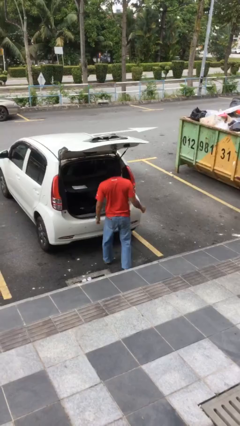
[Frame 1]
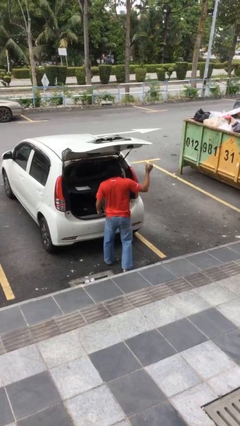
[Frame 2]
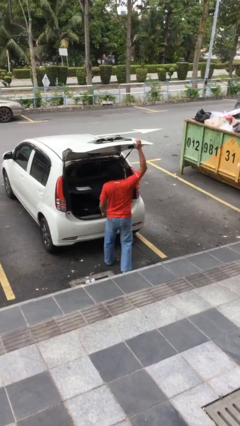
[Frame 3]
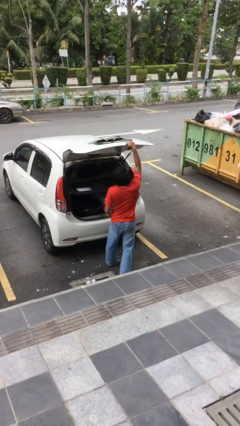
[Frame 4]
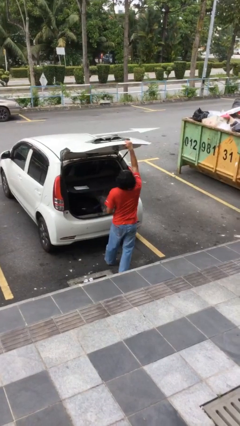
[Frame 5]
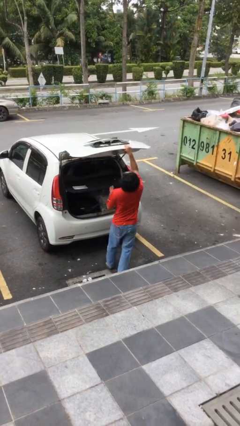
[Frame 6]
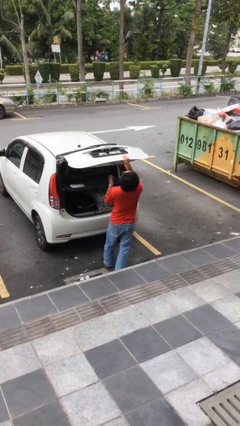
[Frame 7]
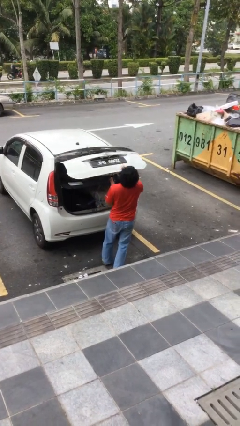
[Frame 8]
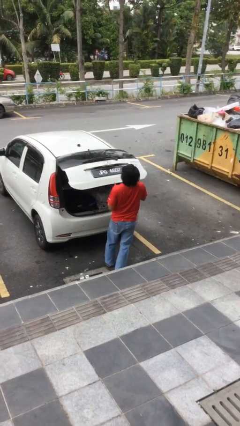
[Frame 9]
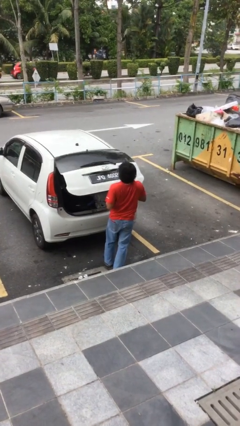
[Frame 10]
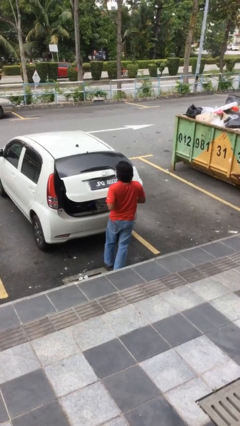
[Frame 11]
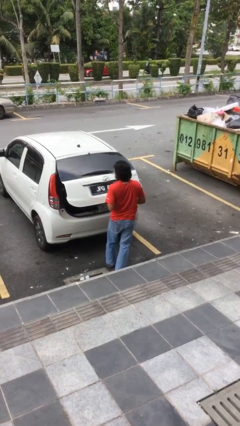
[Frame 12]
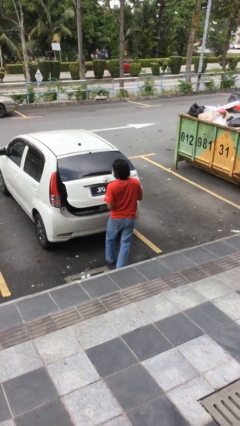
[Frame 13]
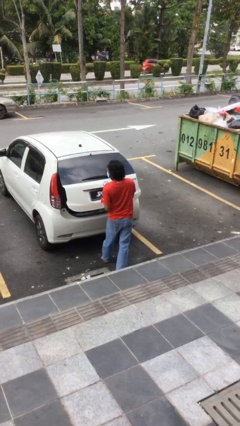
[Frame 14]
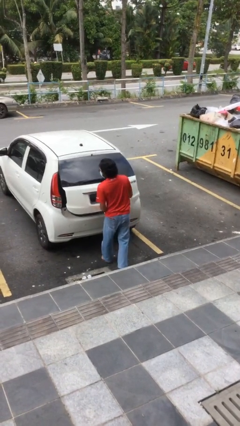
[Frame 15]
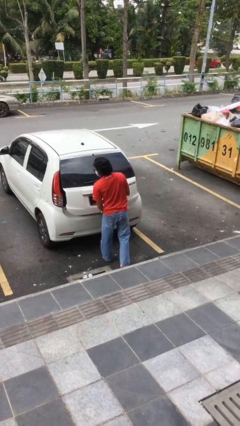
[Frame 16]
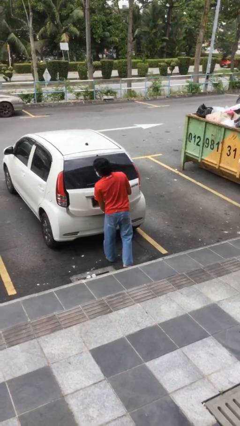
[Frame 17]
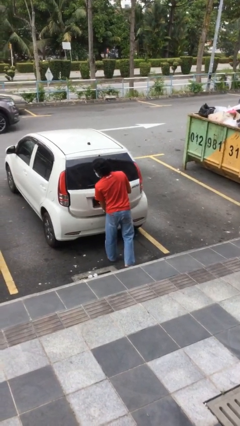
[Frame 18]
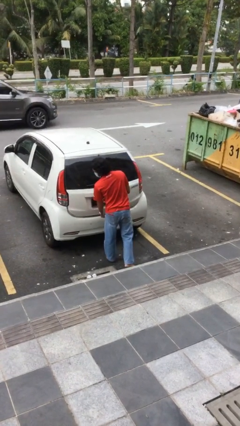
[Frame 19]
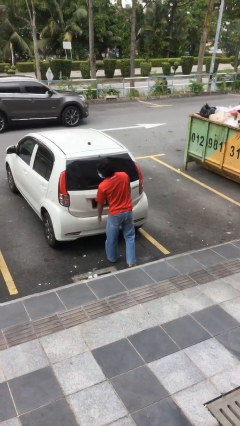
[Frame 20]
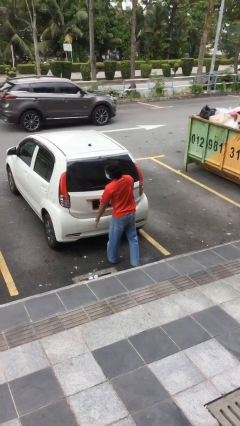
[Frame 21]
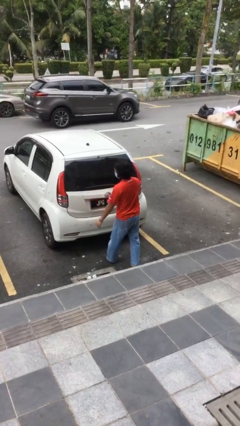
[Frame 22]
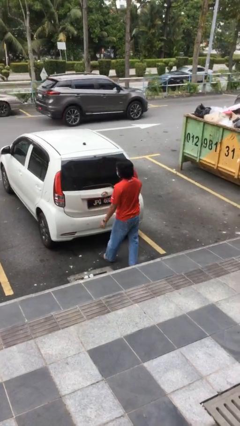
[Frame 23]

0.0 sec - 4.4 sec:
person closes car trunk

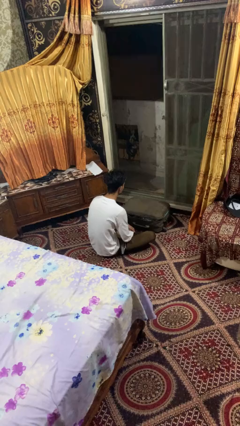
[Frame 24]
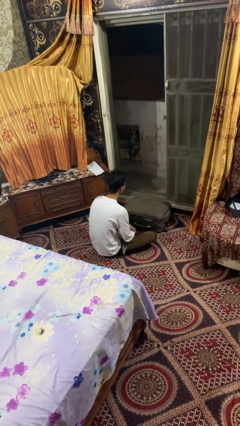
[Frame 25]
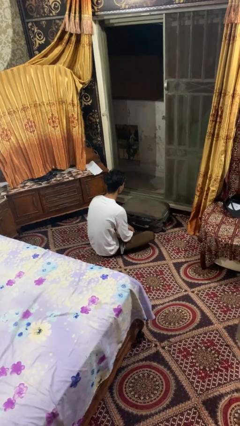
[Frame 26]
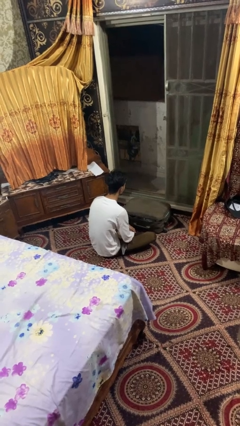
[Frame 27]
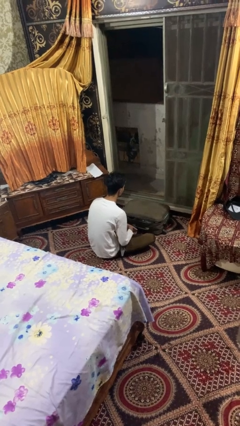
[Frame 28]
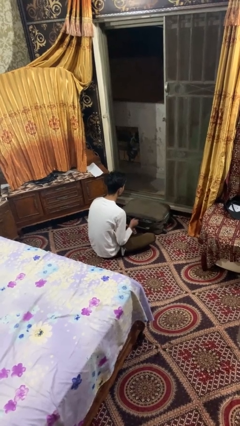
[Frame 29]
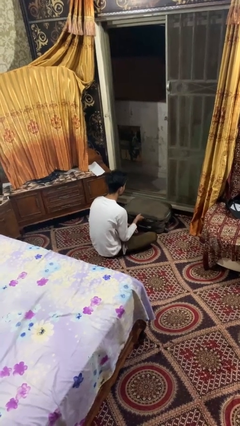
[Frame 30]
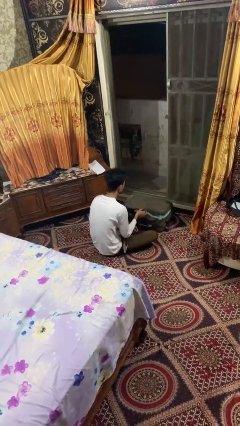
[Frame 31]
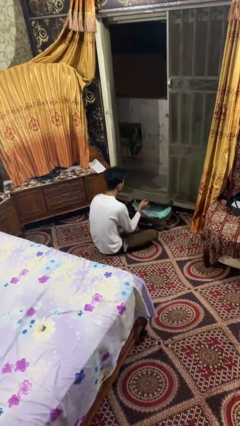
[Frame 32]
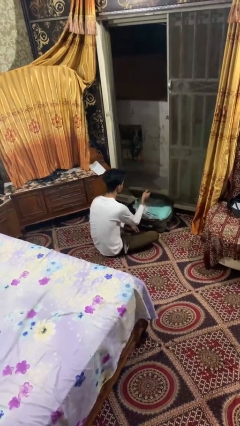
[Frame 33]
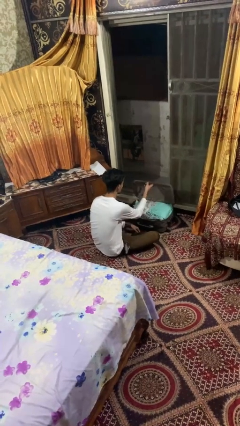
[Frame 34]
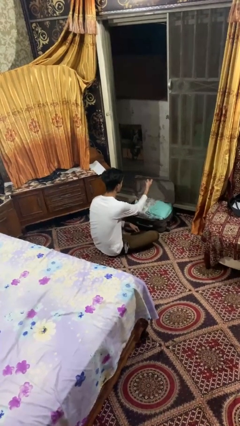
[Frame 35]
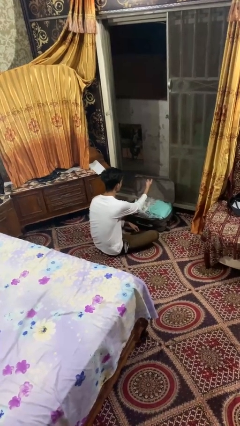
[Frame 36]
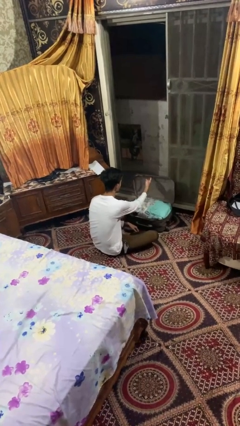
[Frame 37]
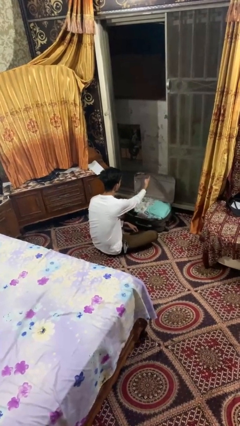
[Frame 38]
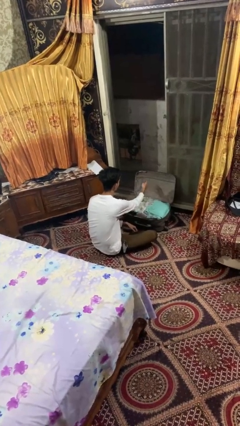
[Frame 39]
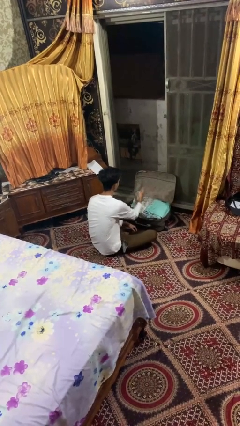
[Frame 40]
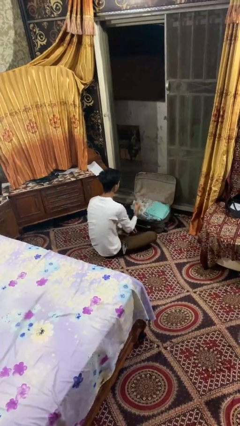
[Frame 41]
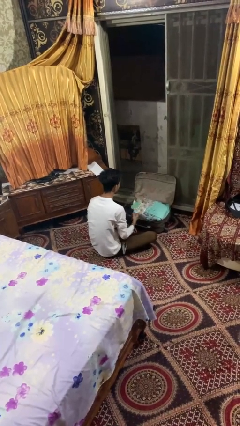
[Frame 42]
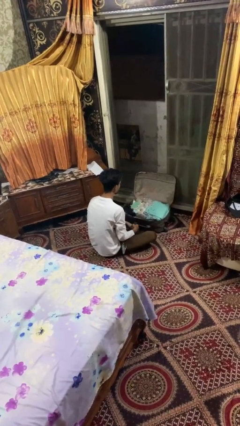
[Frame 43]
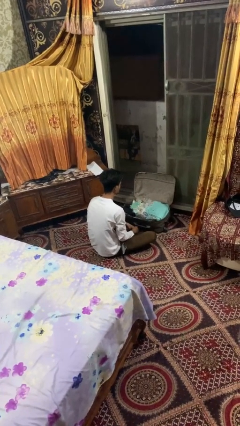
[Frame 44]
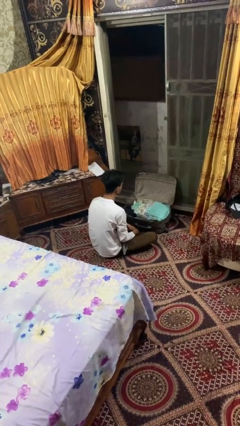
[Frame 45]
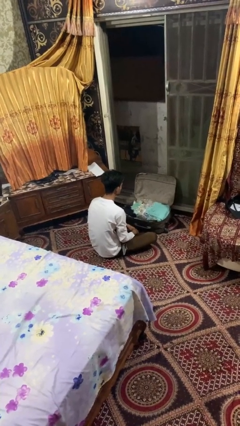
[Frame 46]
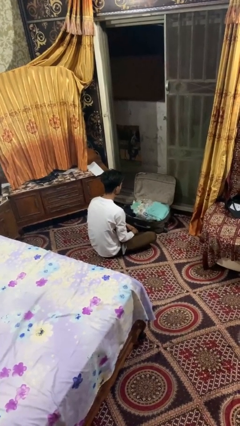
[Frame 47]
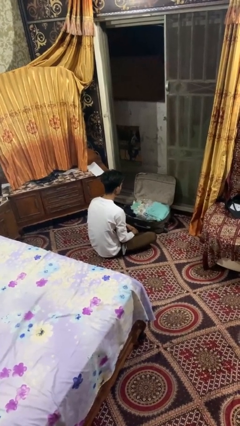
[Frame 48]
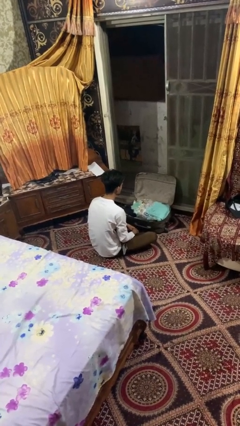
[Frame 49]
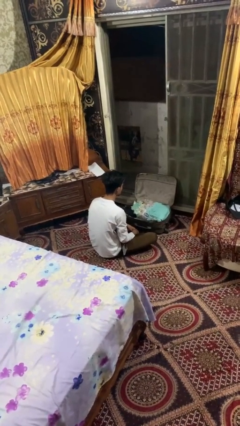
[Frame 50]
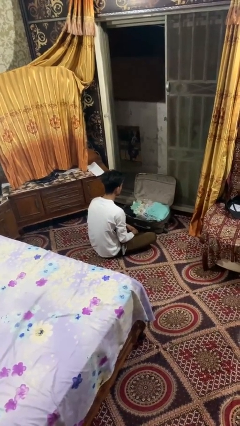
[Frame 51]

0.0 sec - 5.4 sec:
person opens suitcase

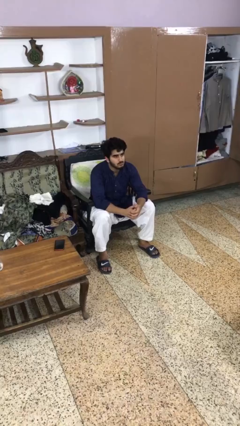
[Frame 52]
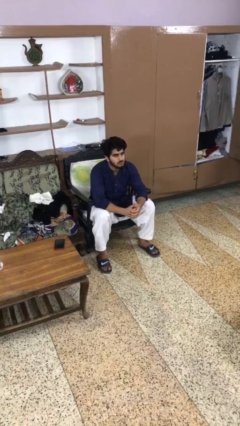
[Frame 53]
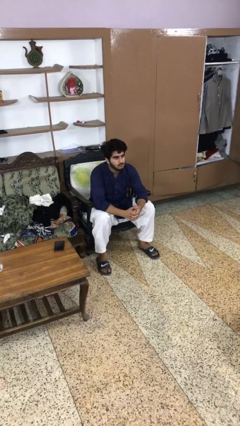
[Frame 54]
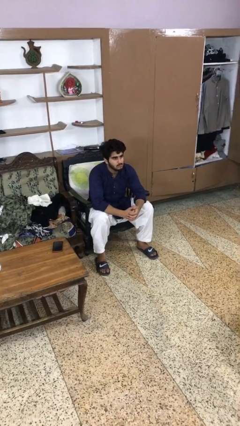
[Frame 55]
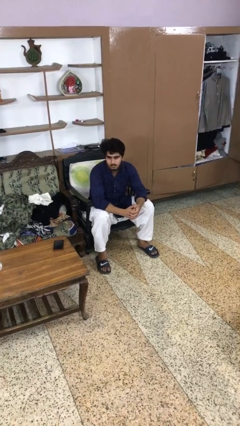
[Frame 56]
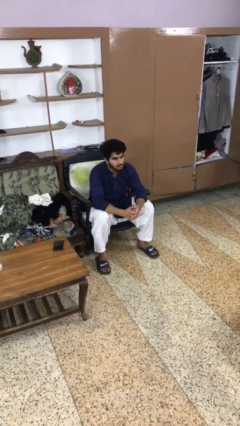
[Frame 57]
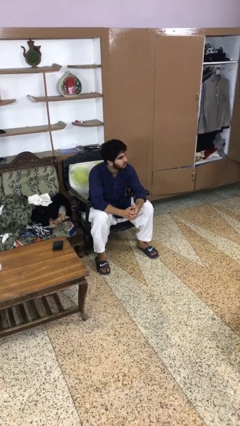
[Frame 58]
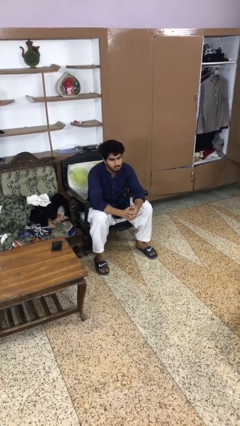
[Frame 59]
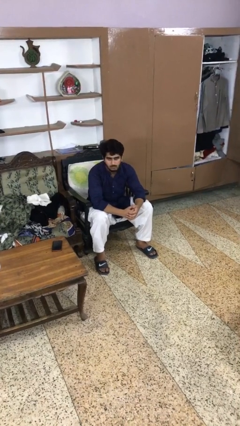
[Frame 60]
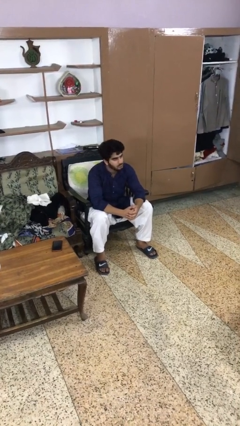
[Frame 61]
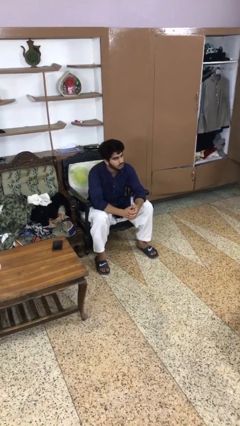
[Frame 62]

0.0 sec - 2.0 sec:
person shakes head

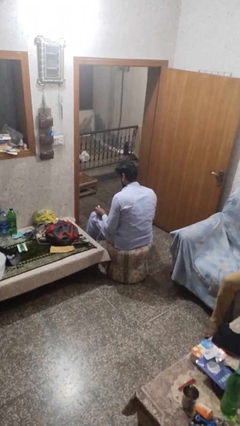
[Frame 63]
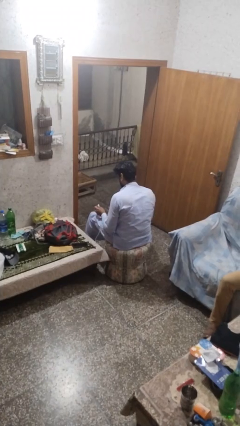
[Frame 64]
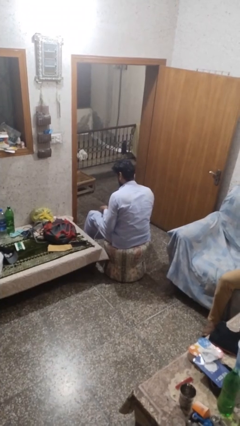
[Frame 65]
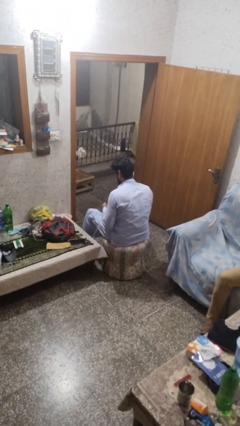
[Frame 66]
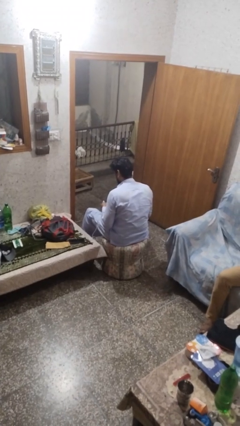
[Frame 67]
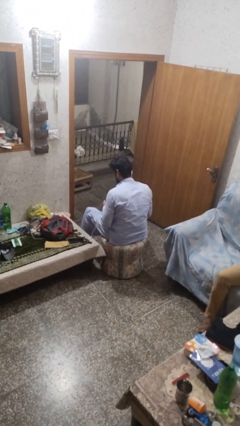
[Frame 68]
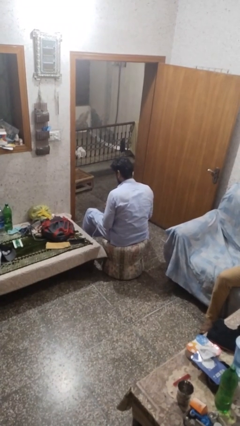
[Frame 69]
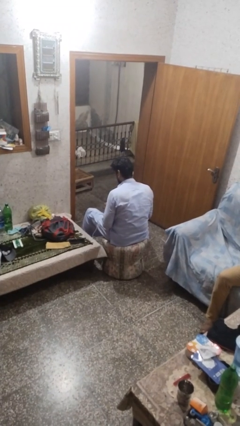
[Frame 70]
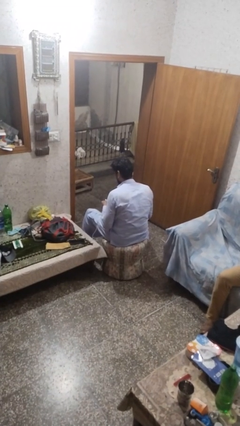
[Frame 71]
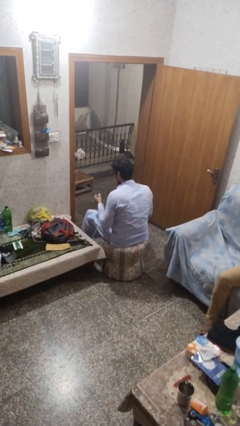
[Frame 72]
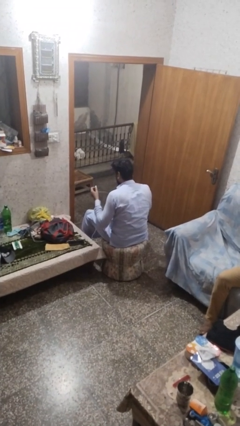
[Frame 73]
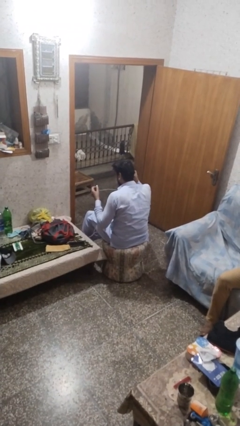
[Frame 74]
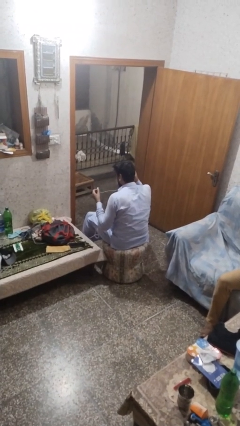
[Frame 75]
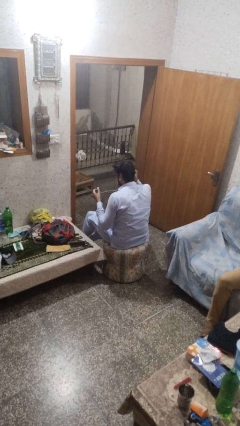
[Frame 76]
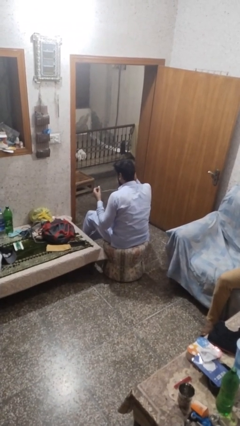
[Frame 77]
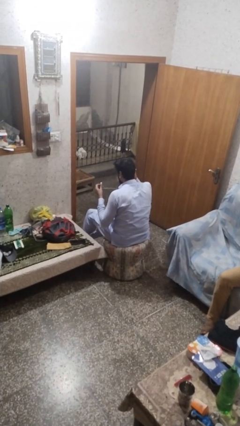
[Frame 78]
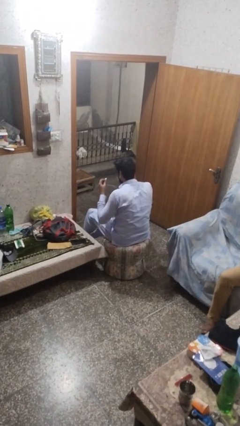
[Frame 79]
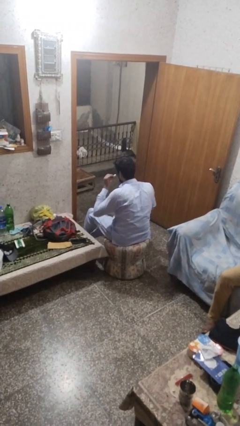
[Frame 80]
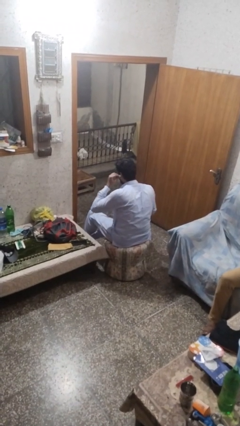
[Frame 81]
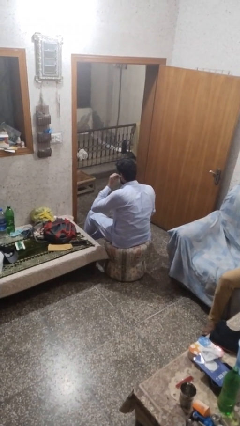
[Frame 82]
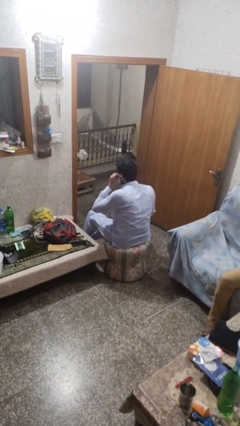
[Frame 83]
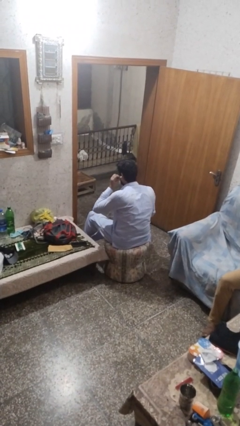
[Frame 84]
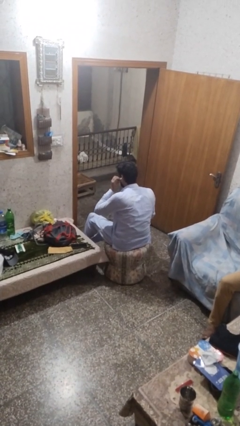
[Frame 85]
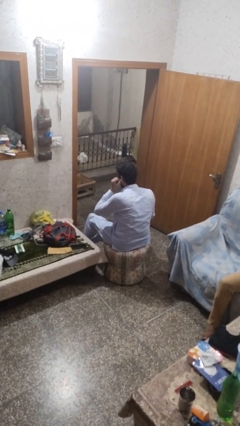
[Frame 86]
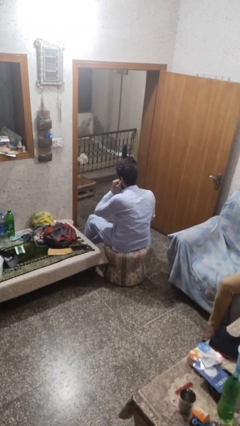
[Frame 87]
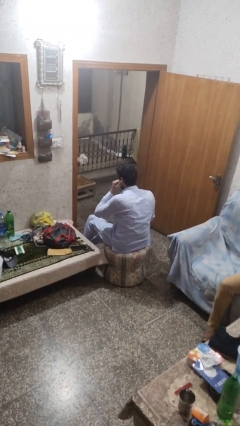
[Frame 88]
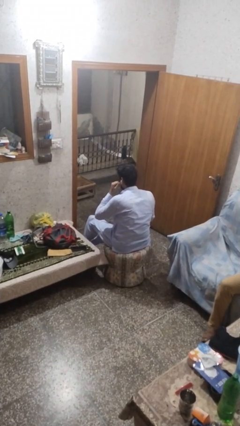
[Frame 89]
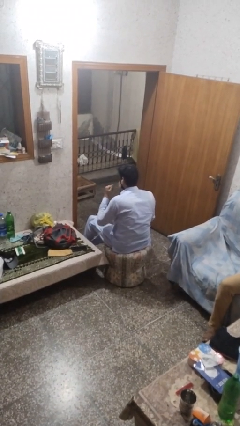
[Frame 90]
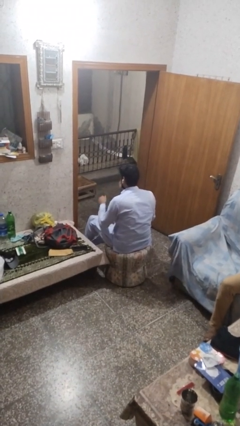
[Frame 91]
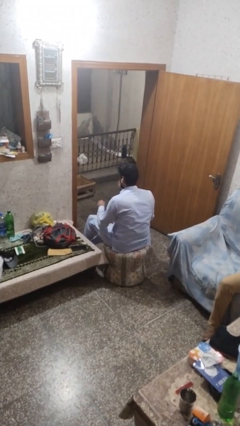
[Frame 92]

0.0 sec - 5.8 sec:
person puts on headphones

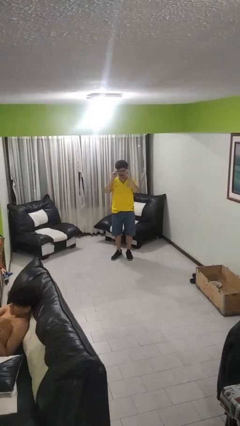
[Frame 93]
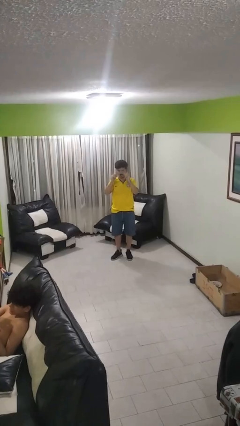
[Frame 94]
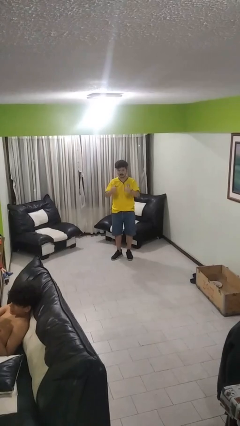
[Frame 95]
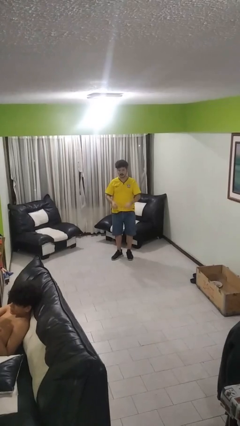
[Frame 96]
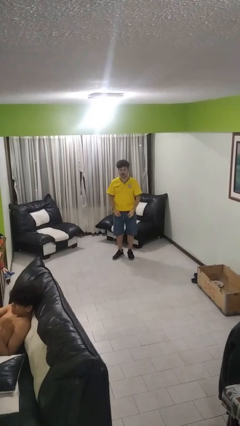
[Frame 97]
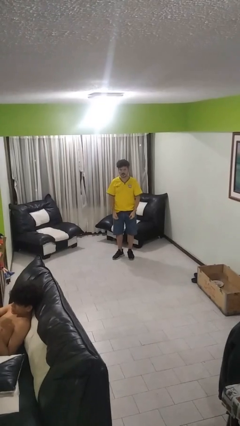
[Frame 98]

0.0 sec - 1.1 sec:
person takes off glasses
